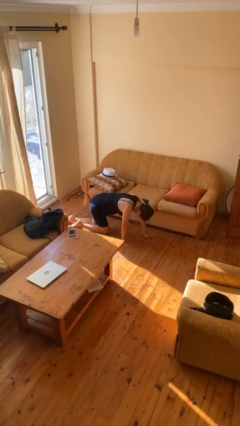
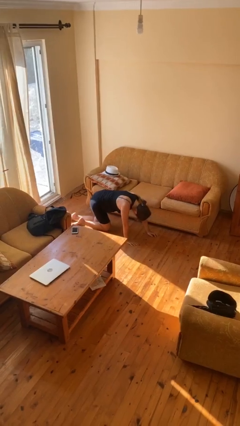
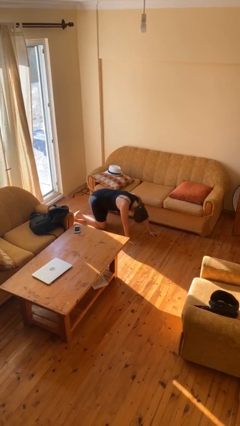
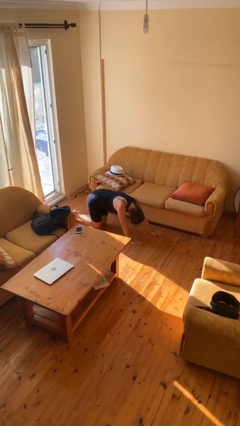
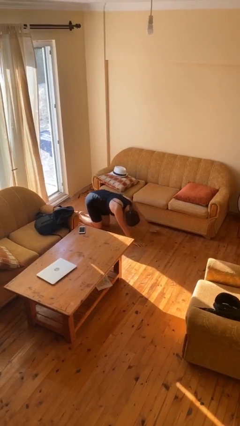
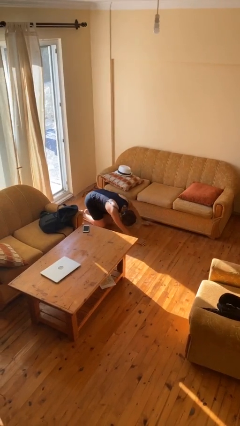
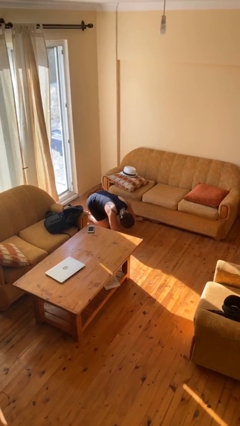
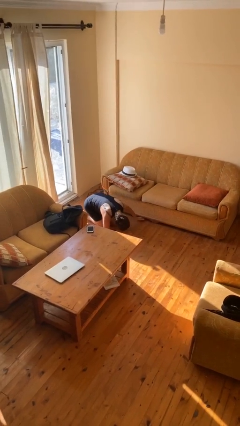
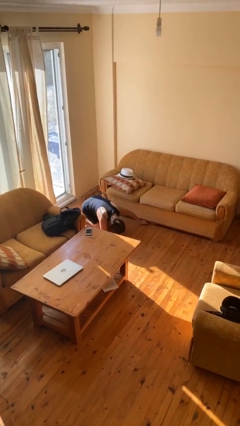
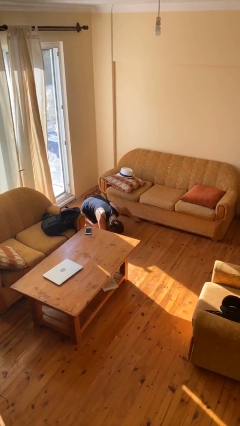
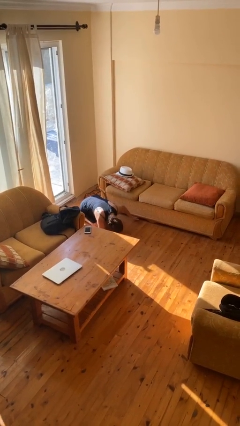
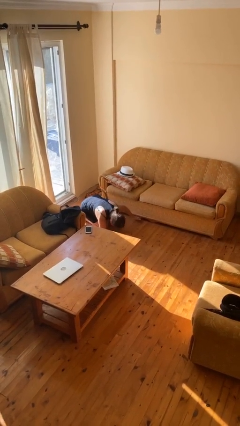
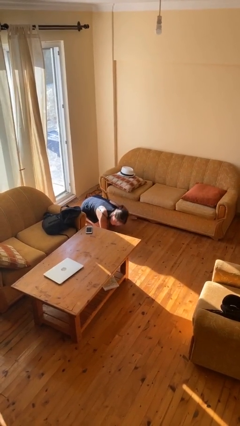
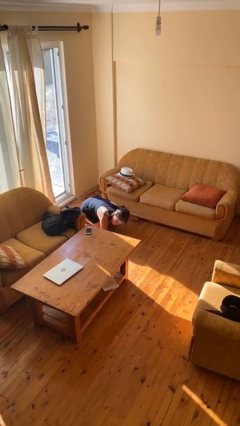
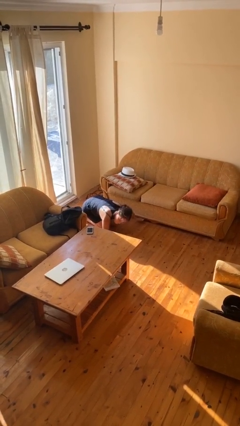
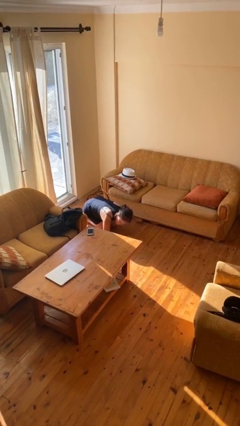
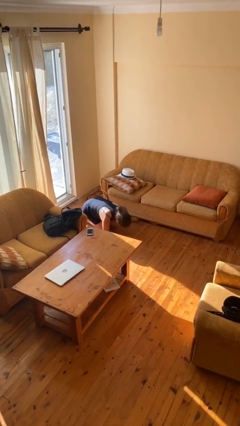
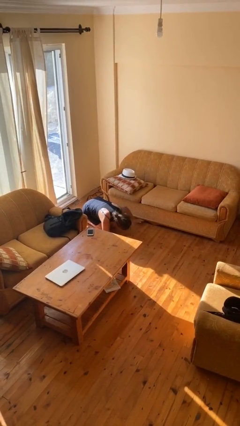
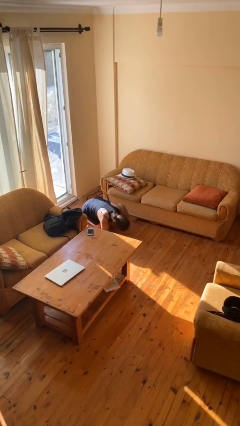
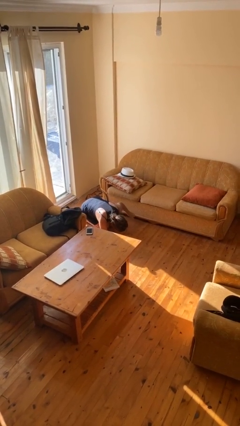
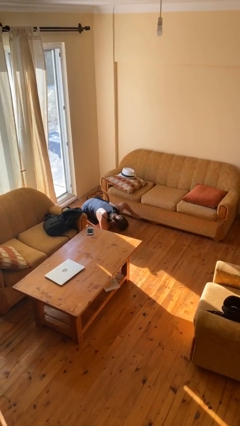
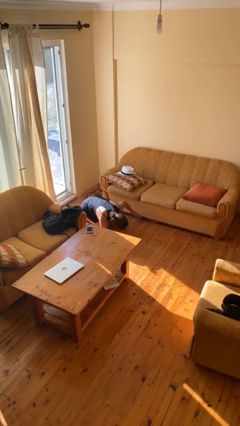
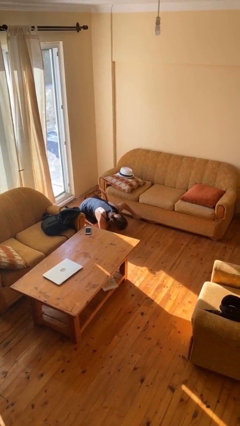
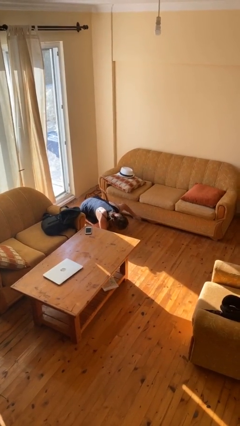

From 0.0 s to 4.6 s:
person searches under couch

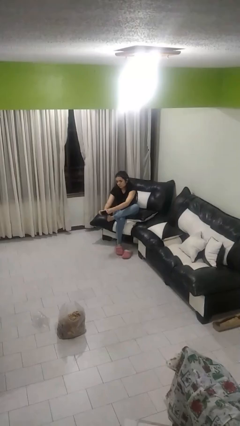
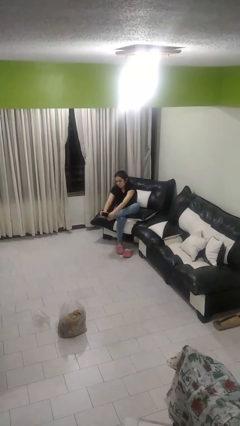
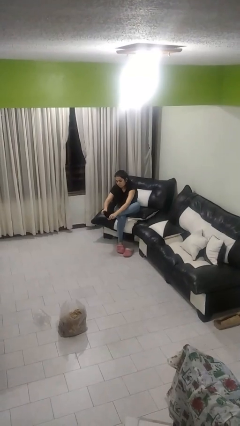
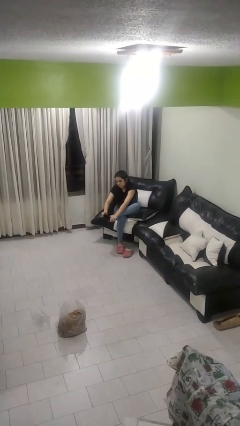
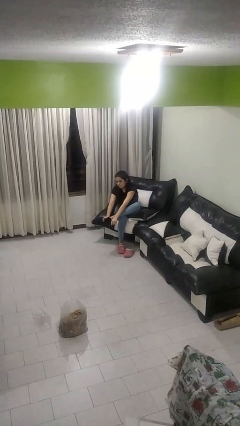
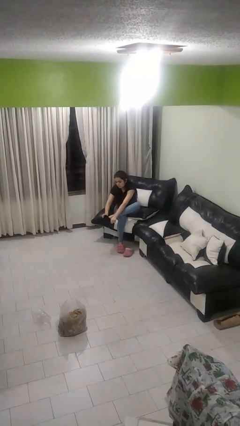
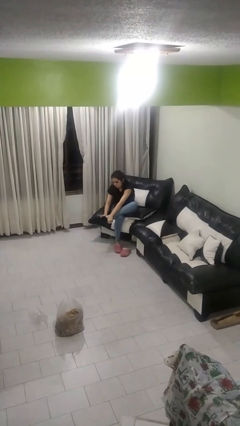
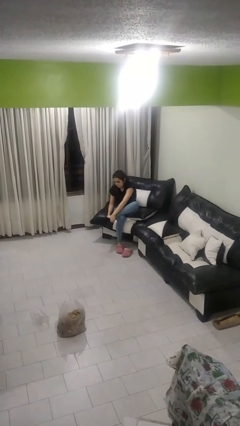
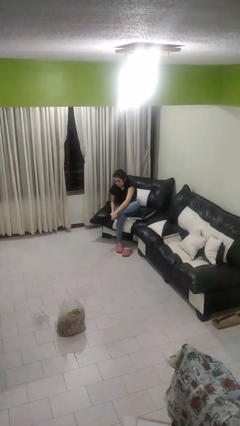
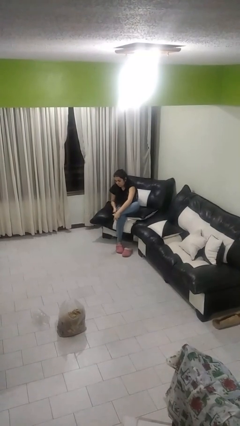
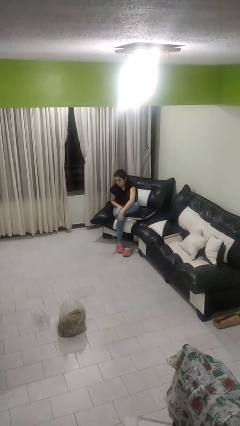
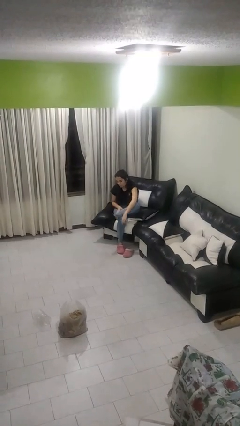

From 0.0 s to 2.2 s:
person puts on socks

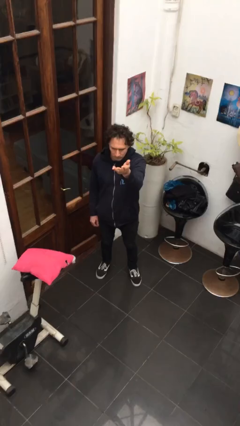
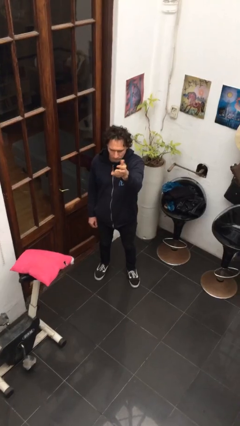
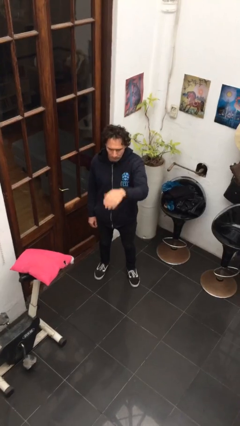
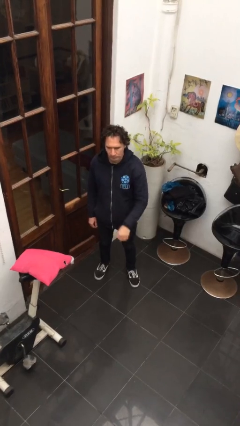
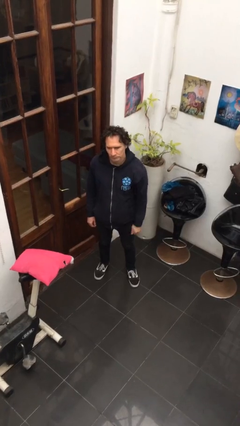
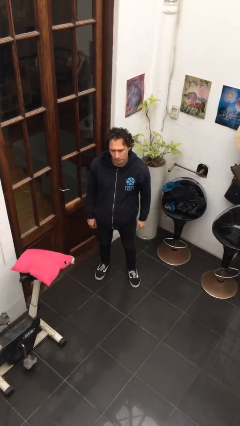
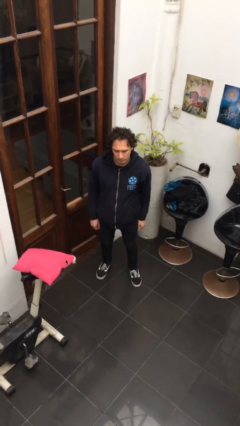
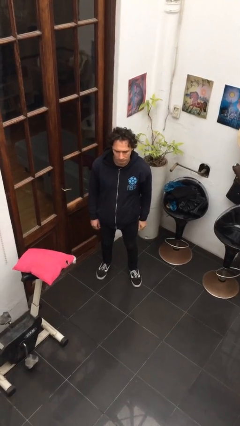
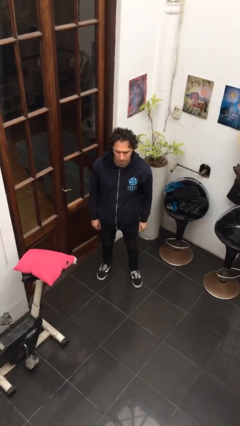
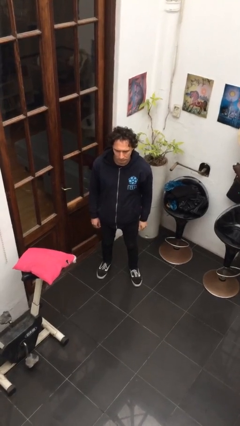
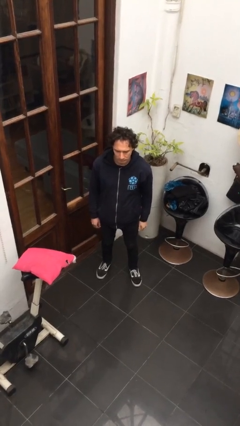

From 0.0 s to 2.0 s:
person gestures swipe down

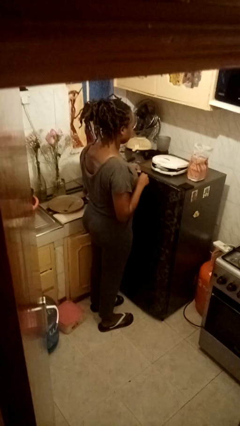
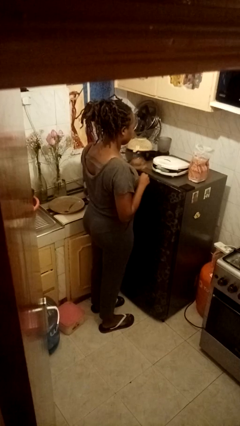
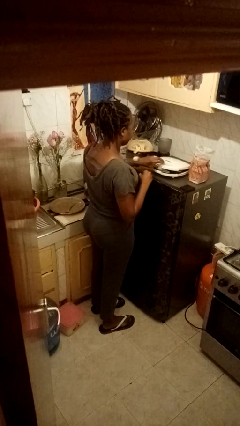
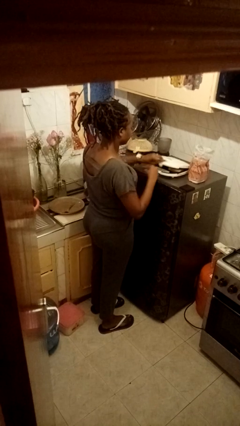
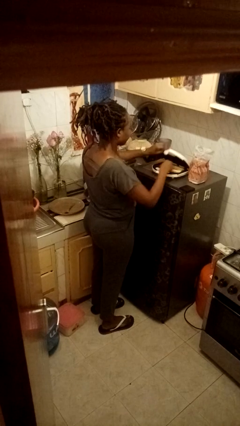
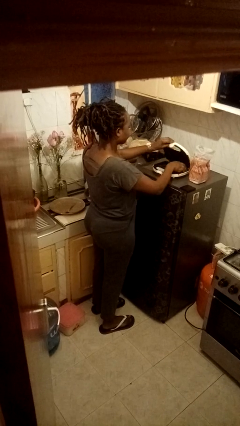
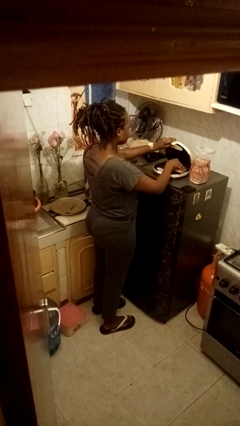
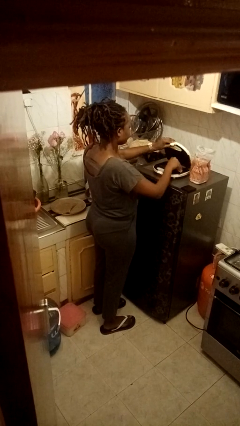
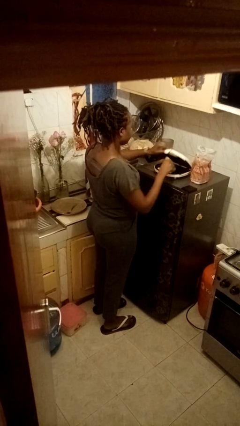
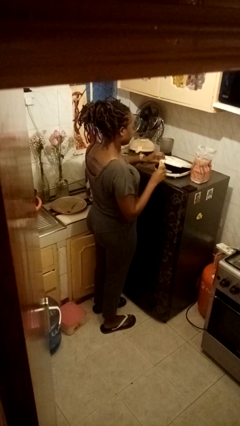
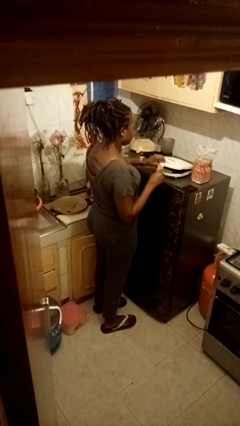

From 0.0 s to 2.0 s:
person takes object from toaster

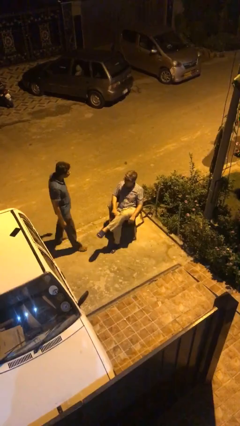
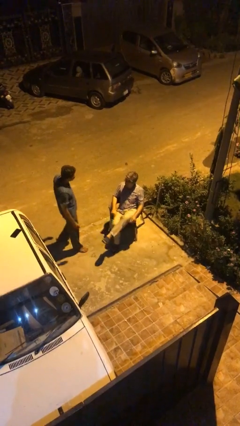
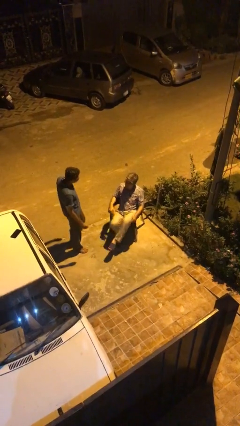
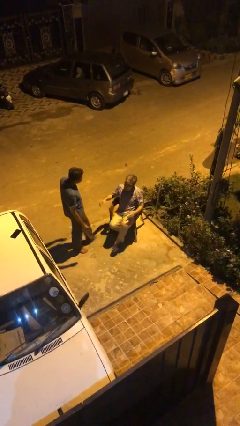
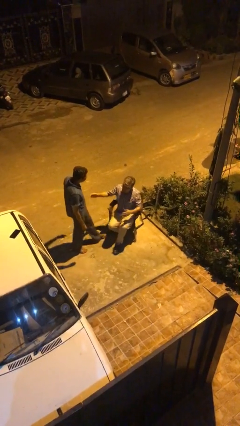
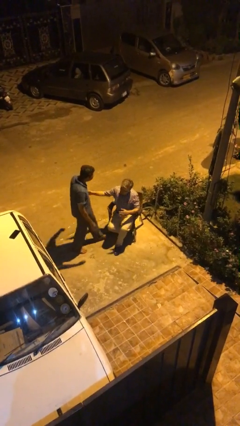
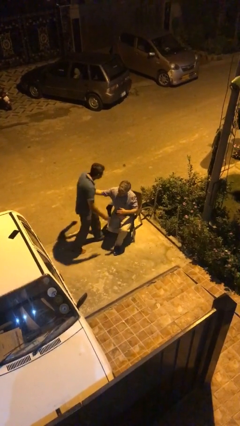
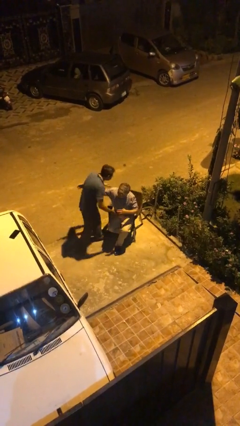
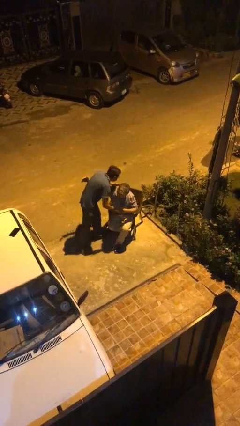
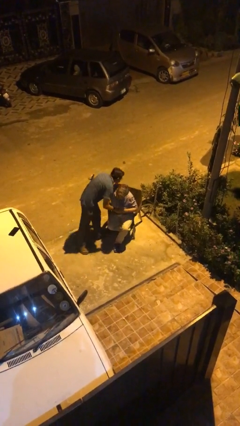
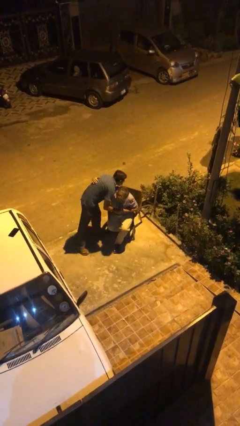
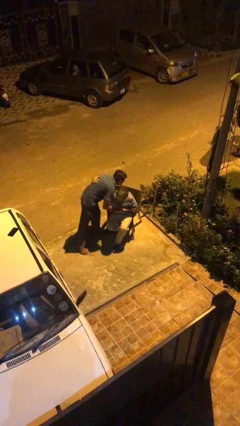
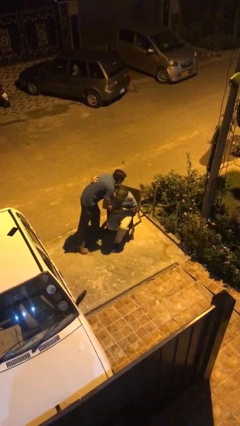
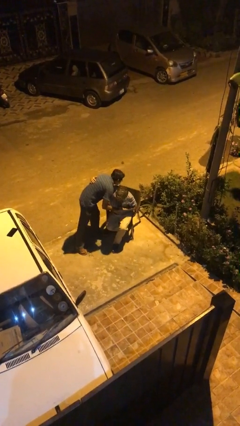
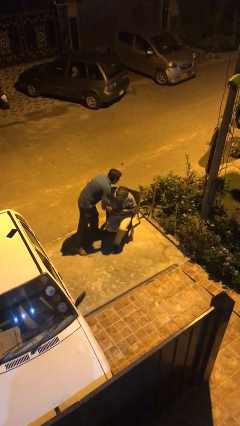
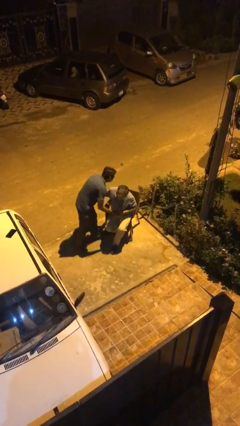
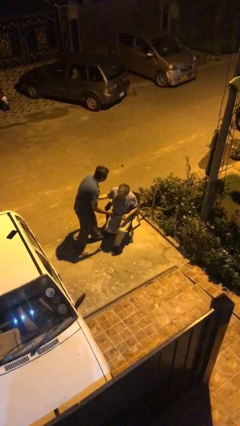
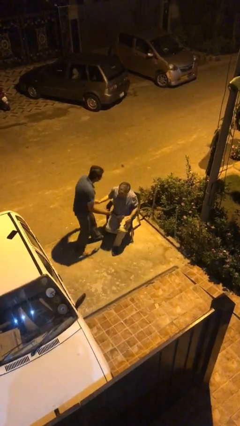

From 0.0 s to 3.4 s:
person embraces person

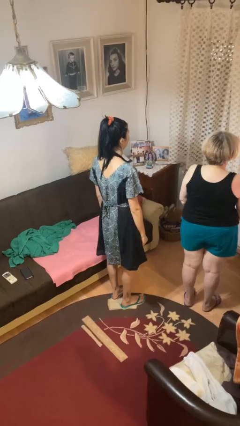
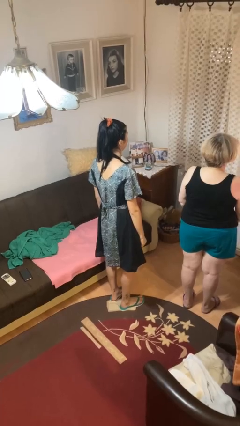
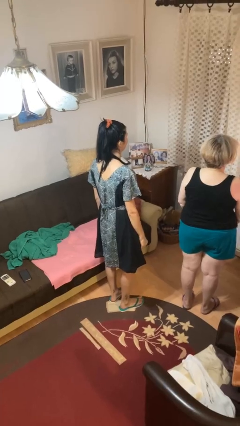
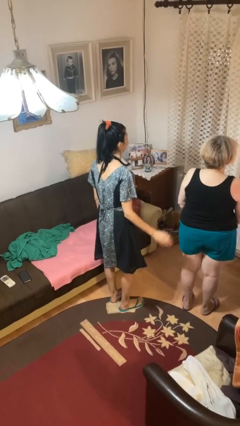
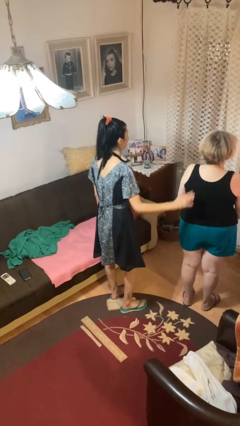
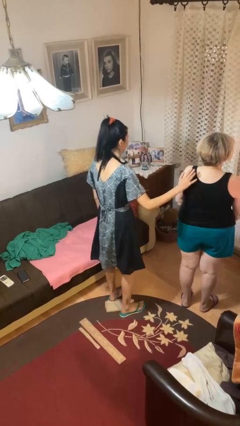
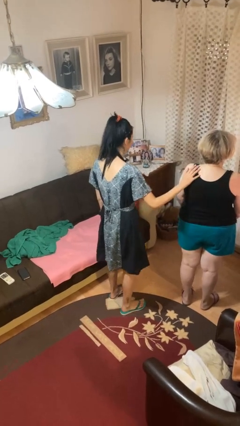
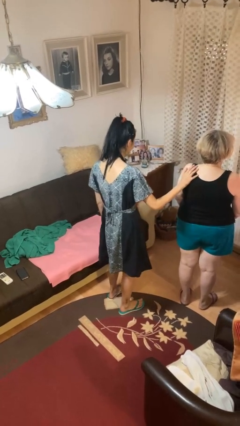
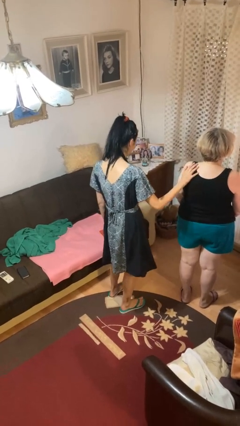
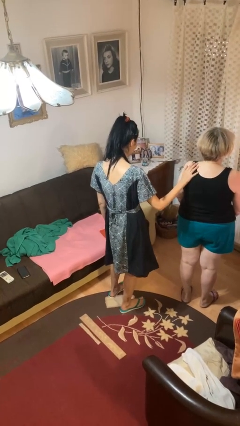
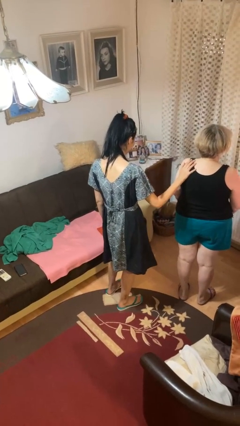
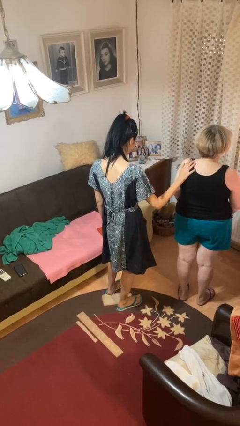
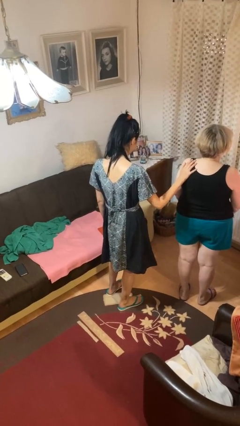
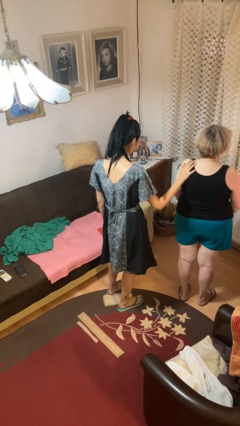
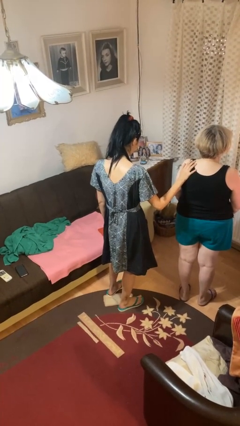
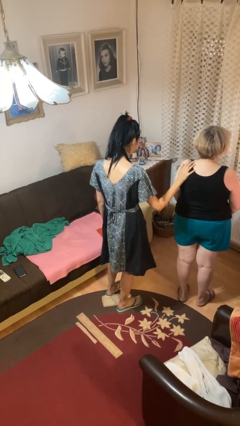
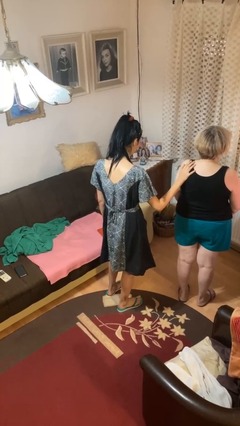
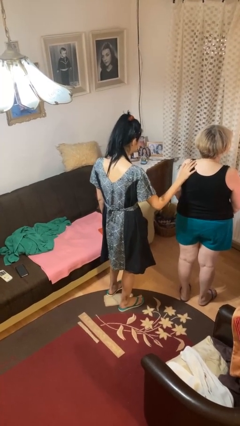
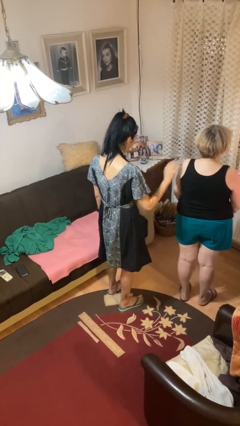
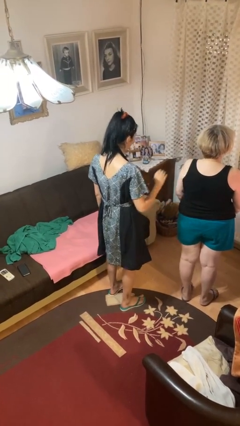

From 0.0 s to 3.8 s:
person touches back of person
